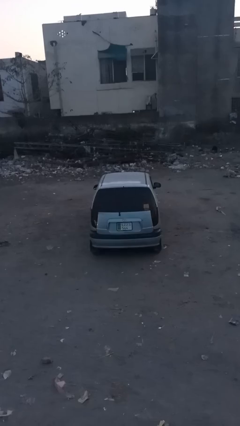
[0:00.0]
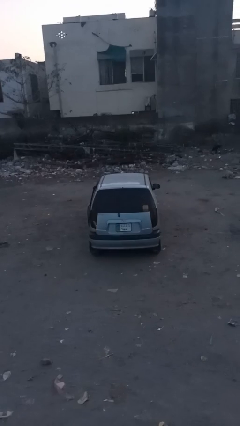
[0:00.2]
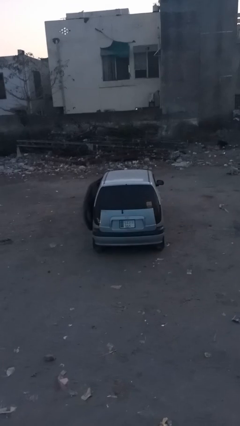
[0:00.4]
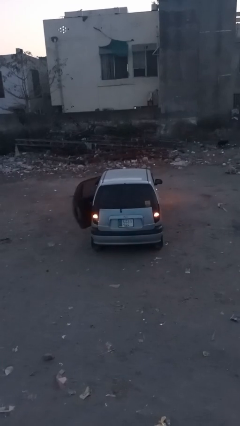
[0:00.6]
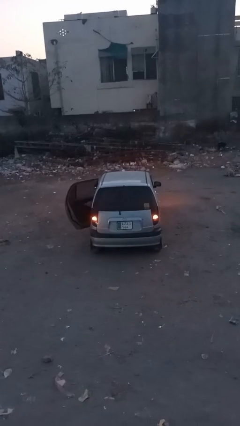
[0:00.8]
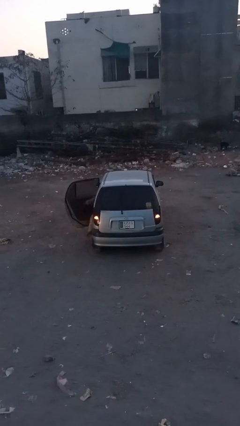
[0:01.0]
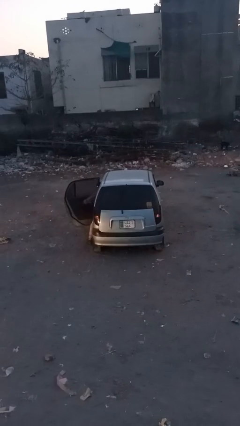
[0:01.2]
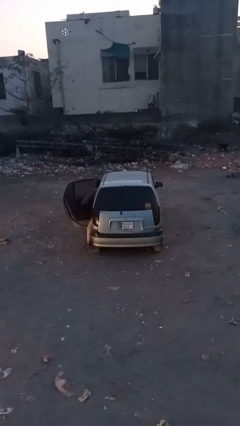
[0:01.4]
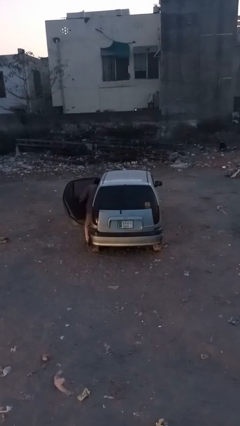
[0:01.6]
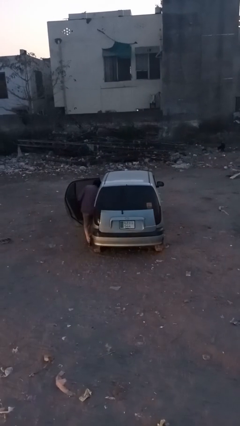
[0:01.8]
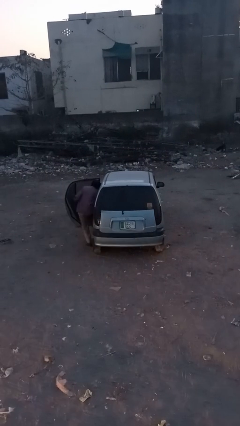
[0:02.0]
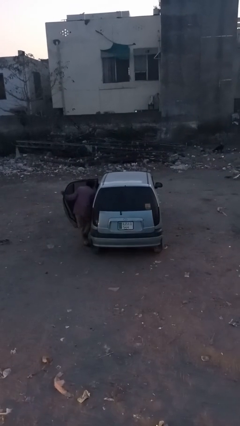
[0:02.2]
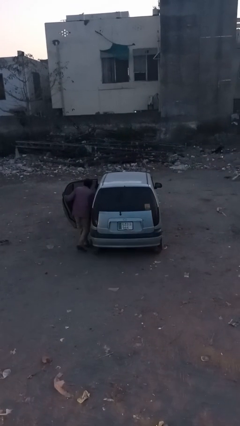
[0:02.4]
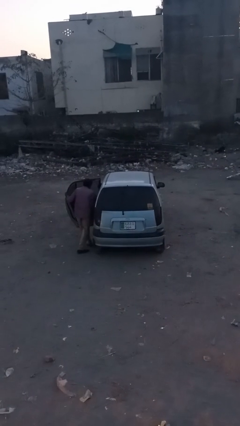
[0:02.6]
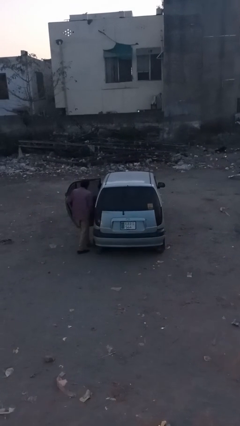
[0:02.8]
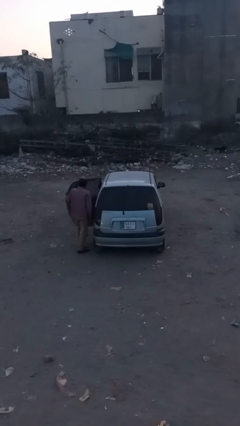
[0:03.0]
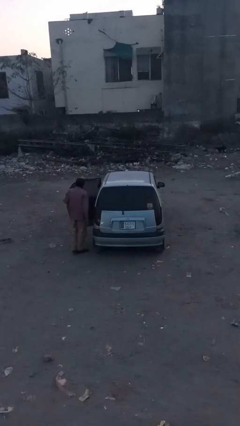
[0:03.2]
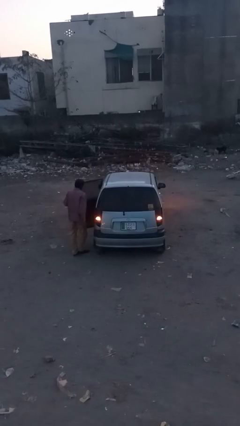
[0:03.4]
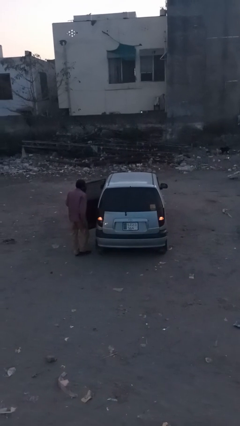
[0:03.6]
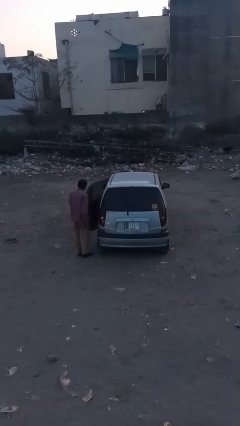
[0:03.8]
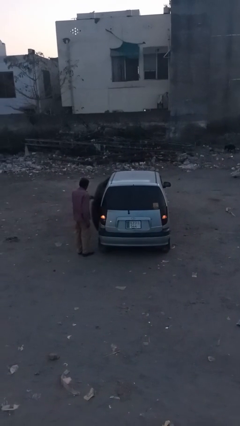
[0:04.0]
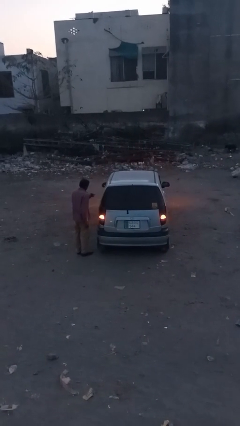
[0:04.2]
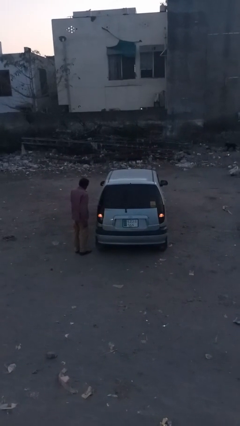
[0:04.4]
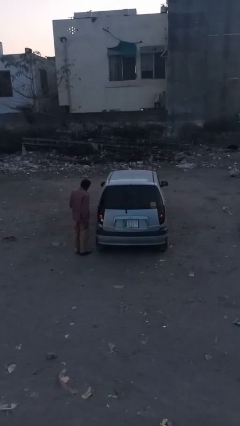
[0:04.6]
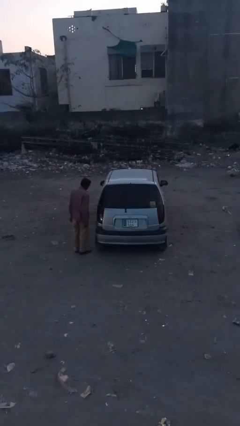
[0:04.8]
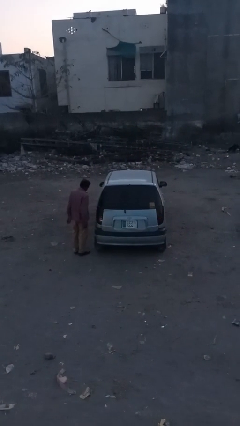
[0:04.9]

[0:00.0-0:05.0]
car drops off person

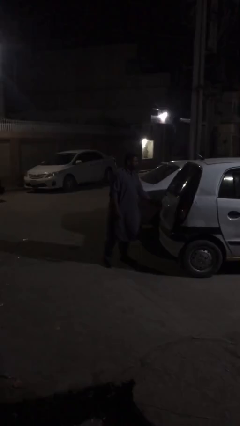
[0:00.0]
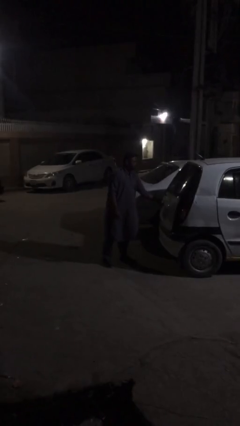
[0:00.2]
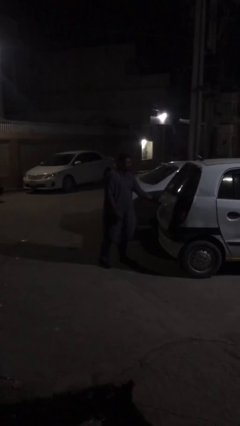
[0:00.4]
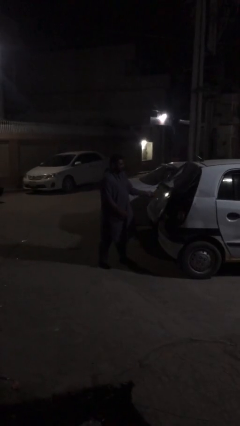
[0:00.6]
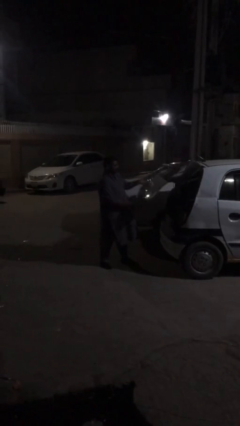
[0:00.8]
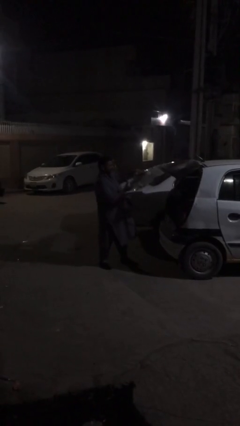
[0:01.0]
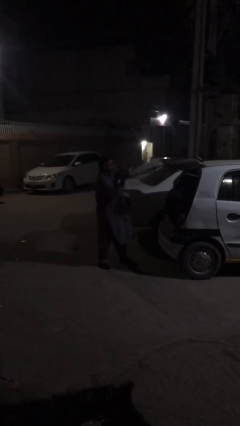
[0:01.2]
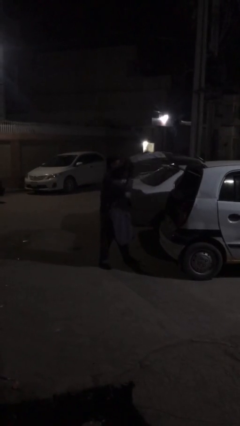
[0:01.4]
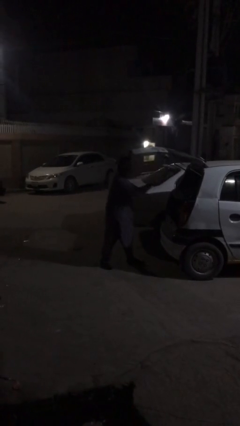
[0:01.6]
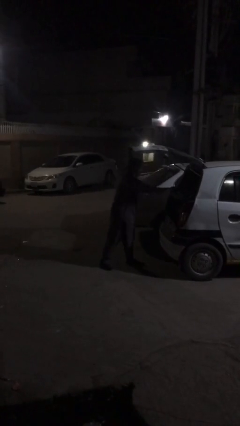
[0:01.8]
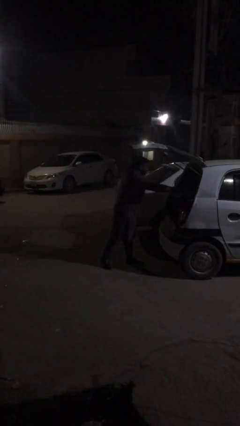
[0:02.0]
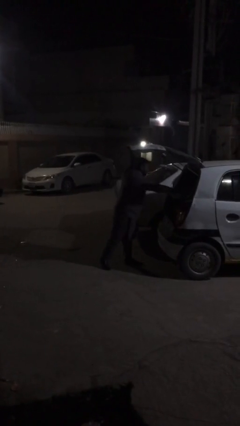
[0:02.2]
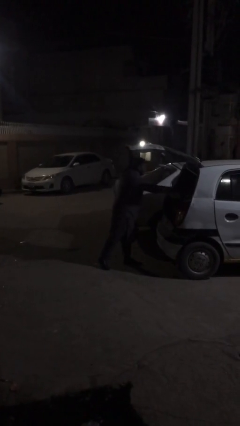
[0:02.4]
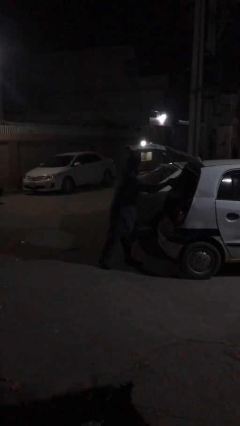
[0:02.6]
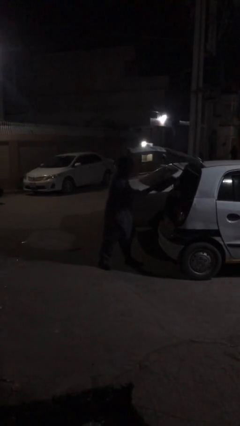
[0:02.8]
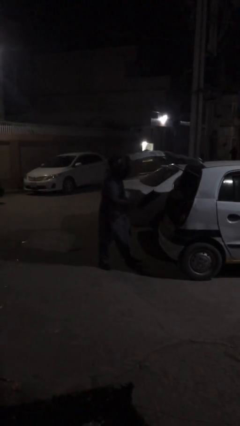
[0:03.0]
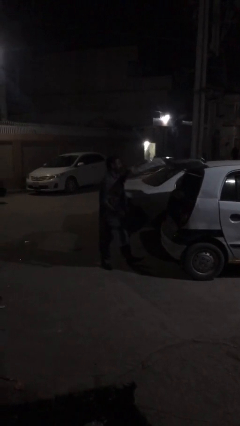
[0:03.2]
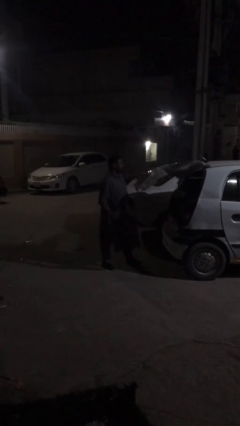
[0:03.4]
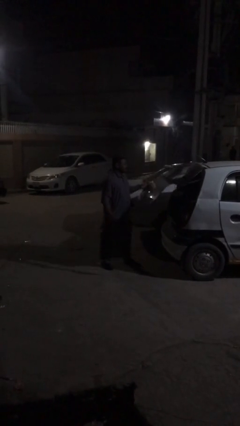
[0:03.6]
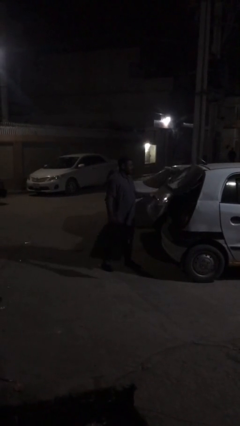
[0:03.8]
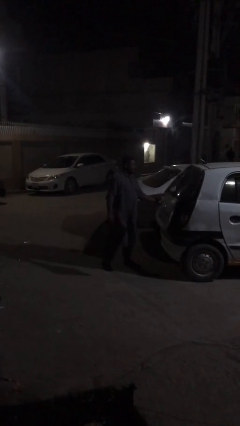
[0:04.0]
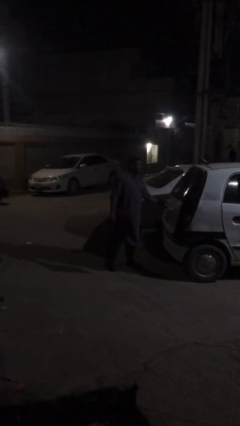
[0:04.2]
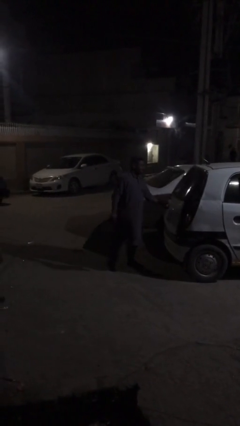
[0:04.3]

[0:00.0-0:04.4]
person unloads car

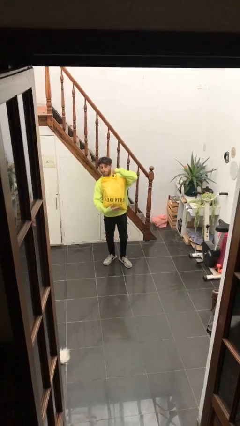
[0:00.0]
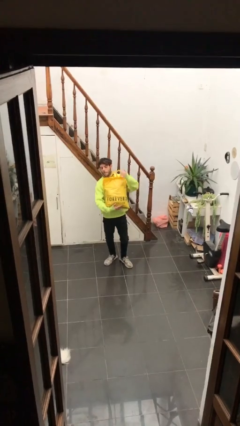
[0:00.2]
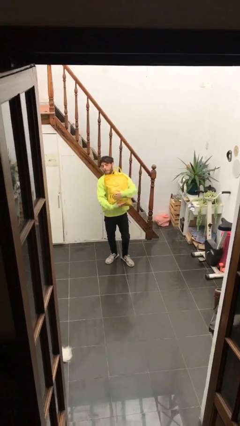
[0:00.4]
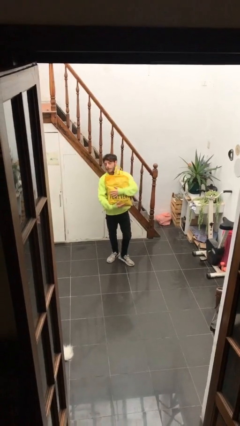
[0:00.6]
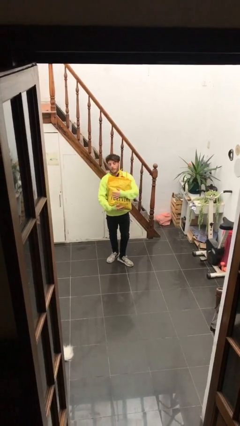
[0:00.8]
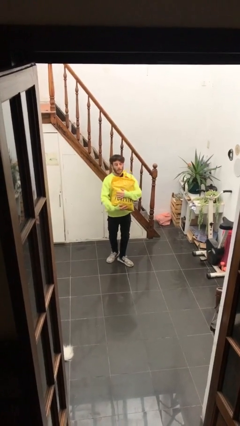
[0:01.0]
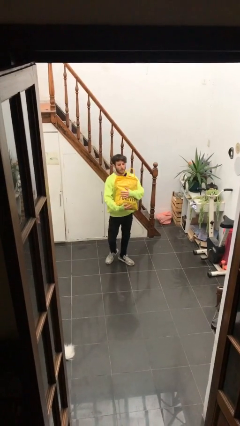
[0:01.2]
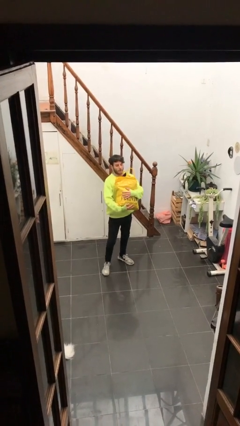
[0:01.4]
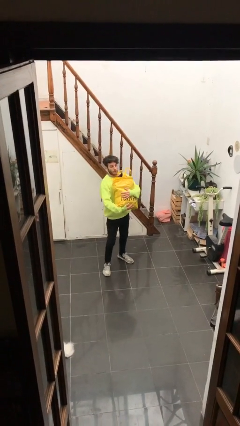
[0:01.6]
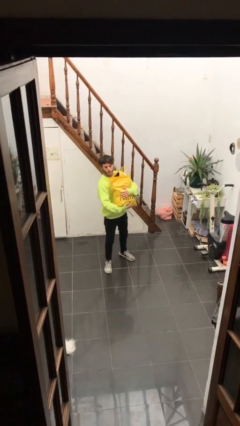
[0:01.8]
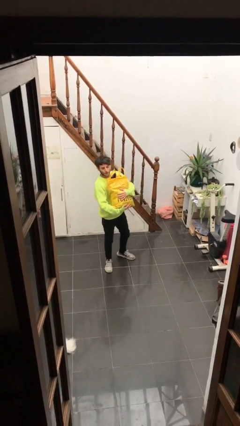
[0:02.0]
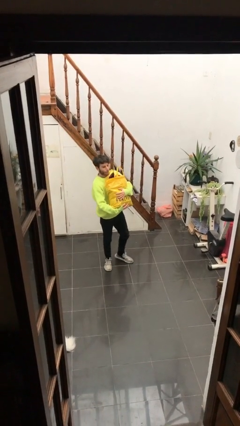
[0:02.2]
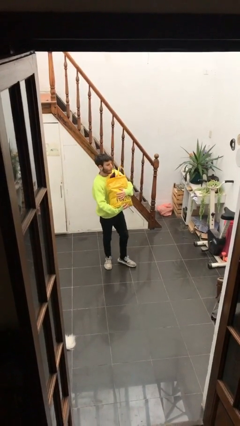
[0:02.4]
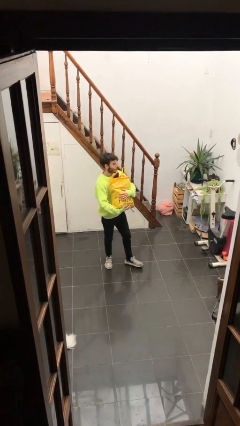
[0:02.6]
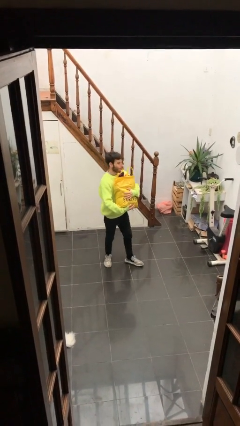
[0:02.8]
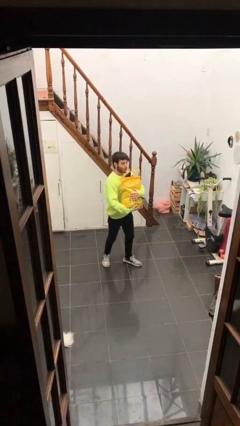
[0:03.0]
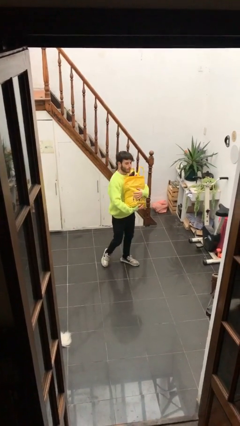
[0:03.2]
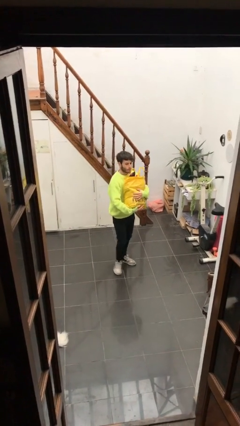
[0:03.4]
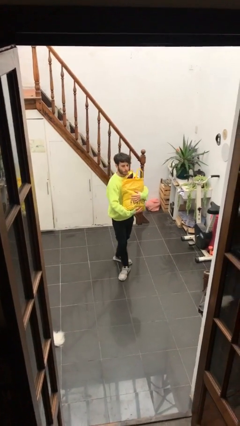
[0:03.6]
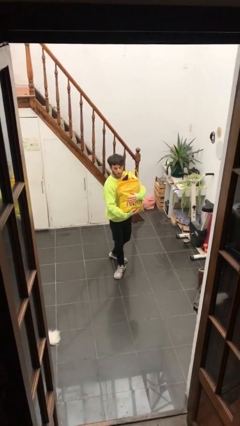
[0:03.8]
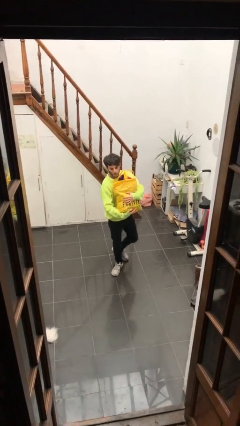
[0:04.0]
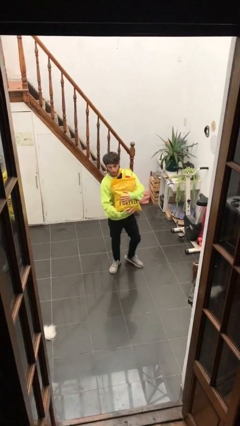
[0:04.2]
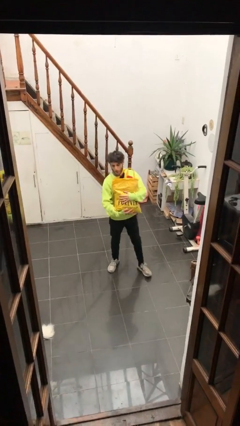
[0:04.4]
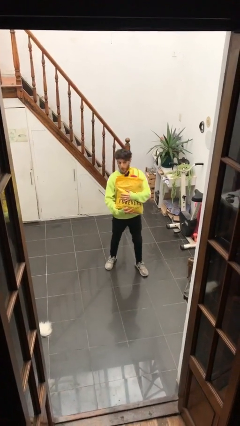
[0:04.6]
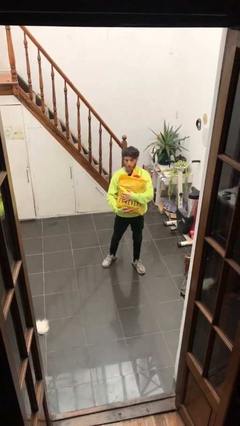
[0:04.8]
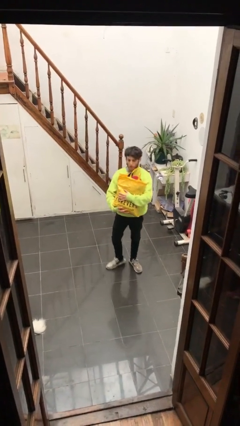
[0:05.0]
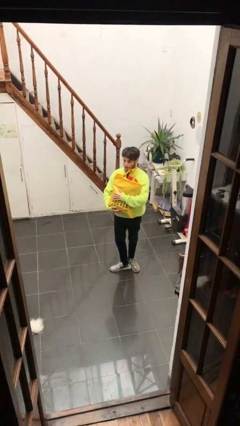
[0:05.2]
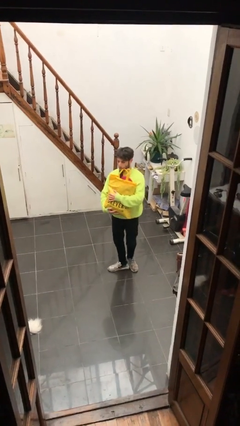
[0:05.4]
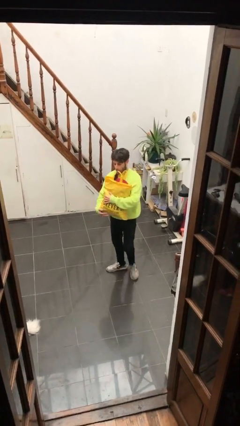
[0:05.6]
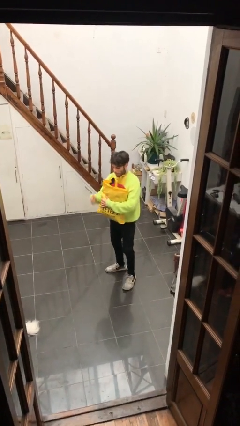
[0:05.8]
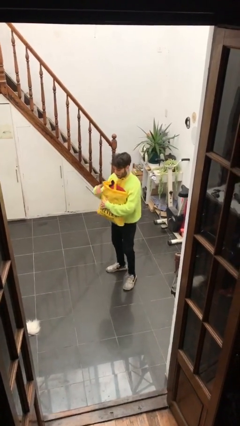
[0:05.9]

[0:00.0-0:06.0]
person carries heavy object

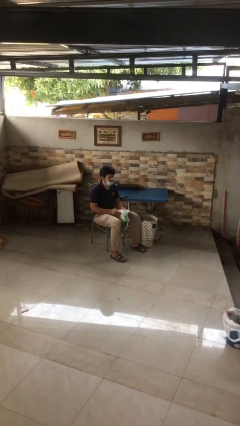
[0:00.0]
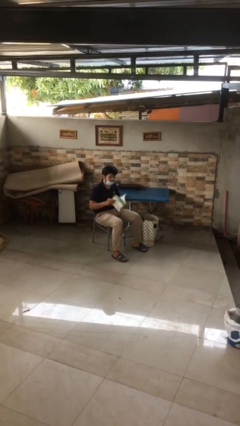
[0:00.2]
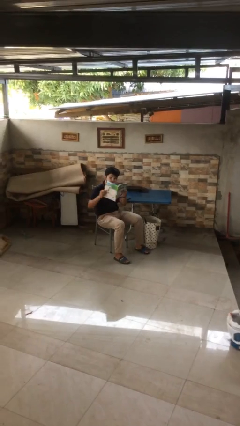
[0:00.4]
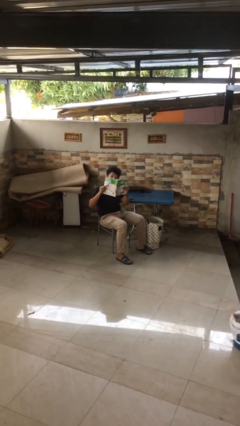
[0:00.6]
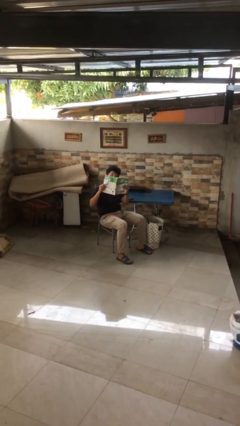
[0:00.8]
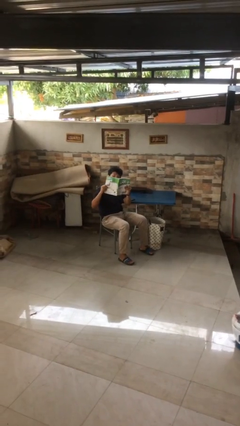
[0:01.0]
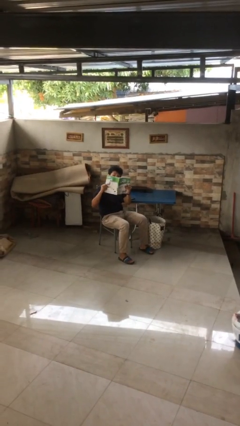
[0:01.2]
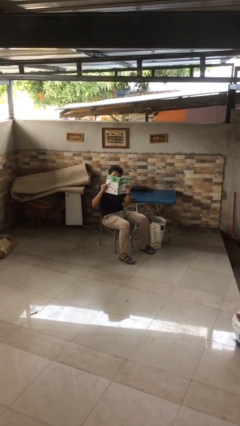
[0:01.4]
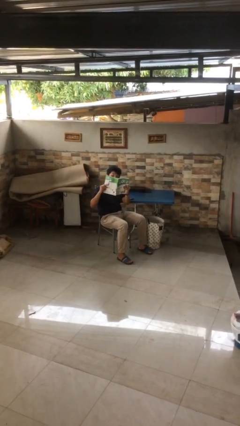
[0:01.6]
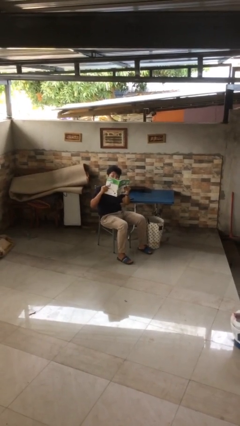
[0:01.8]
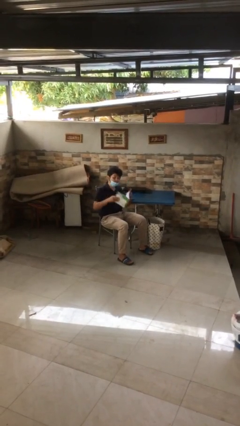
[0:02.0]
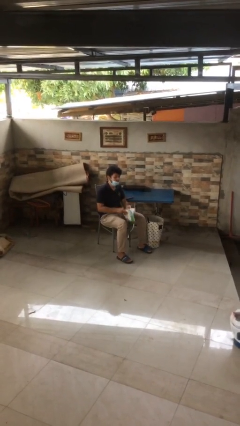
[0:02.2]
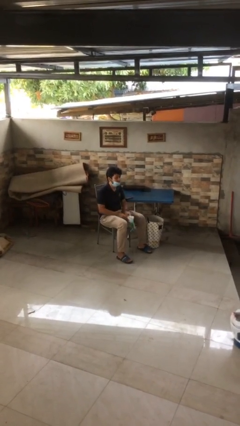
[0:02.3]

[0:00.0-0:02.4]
person reads magazine

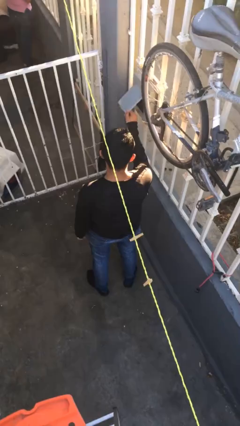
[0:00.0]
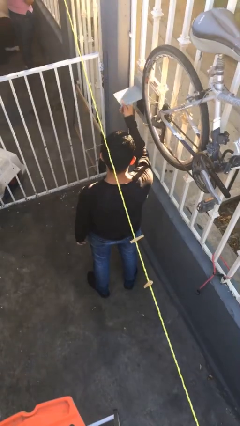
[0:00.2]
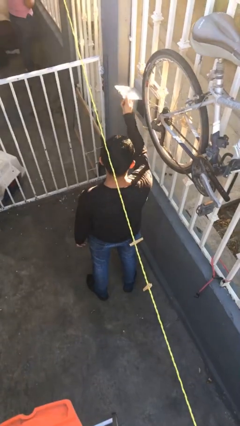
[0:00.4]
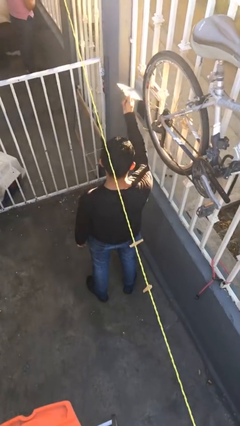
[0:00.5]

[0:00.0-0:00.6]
person opens mailbox
